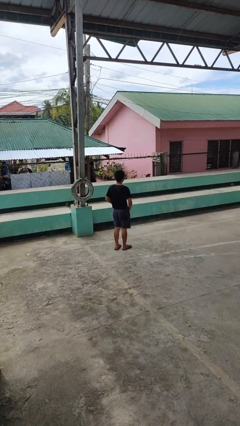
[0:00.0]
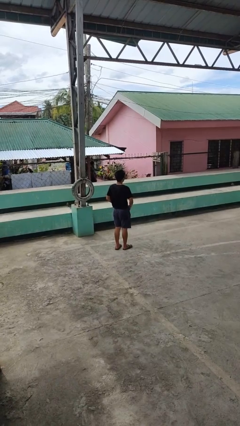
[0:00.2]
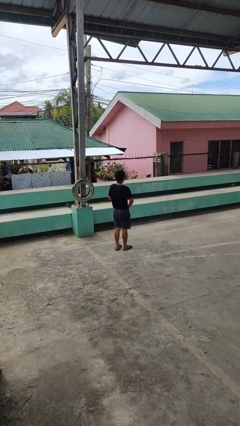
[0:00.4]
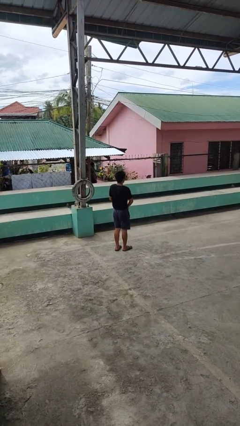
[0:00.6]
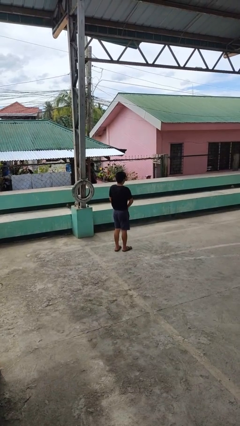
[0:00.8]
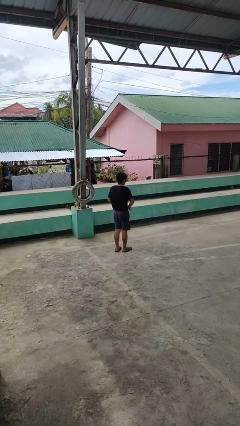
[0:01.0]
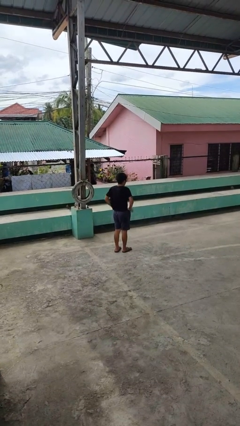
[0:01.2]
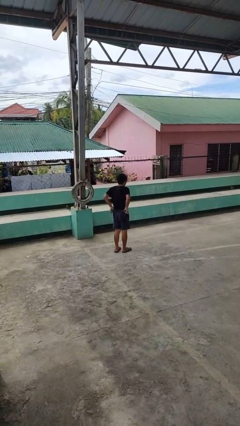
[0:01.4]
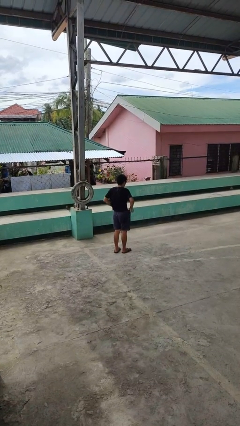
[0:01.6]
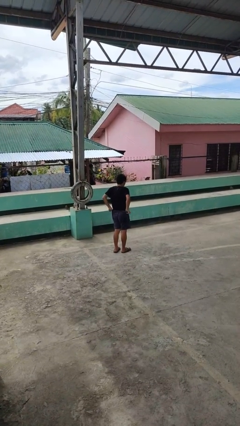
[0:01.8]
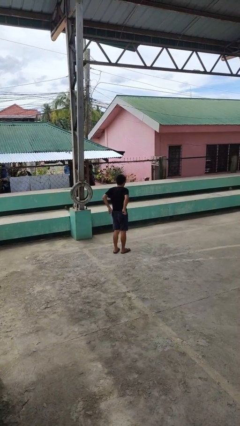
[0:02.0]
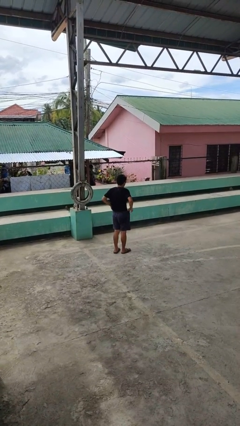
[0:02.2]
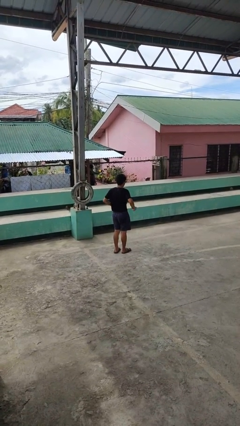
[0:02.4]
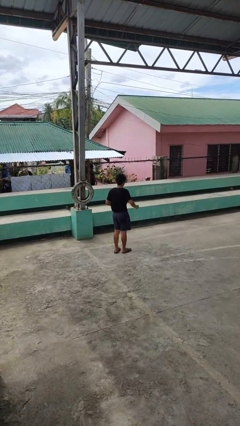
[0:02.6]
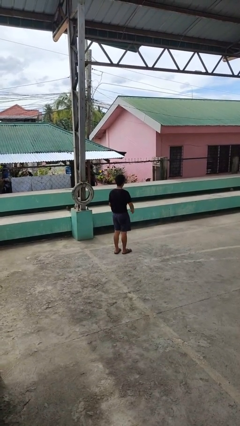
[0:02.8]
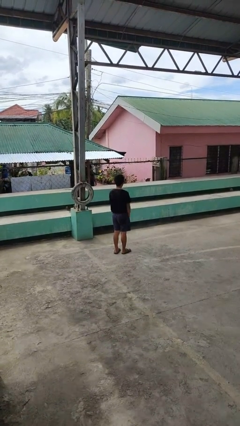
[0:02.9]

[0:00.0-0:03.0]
person hikes up pants

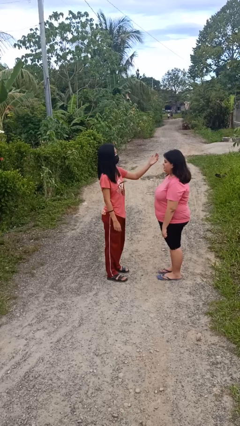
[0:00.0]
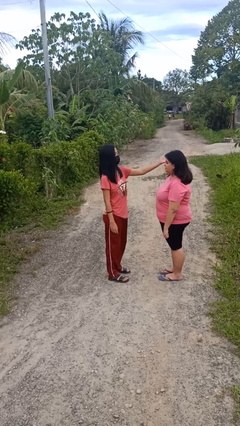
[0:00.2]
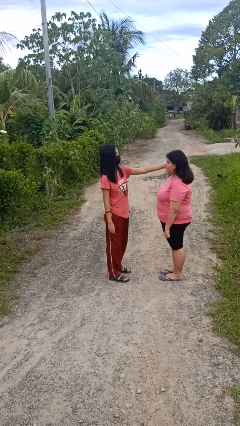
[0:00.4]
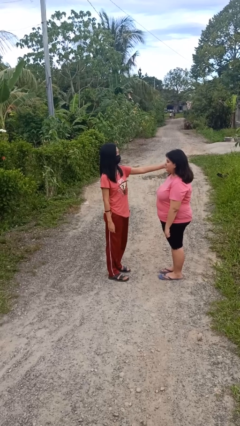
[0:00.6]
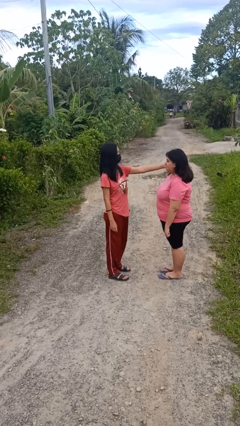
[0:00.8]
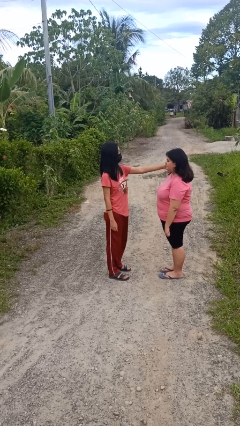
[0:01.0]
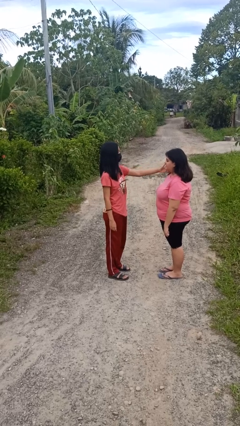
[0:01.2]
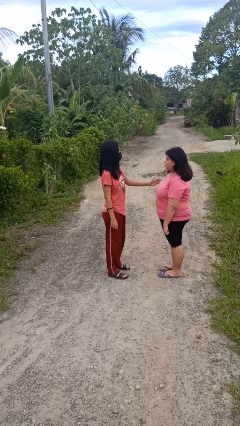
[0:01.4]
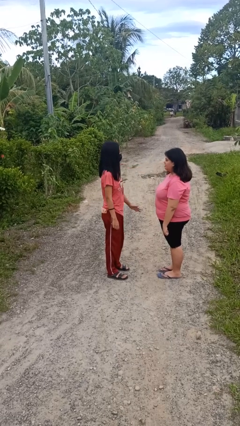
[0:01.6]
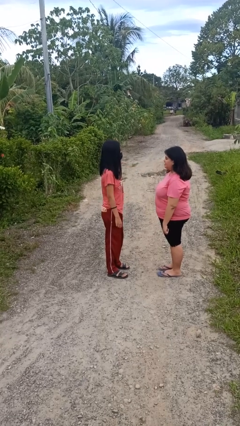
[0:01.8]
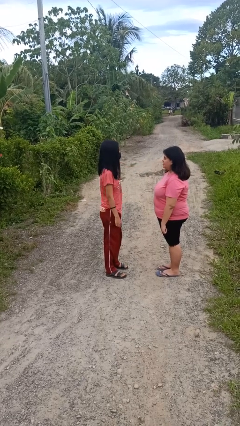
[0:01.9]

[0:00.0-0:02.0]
person touches face of person

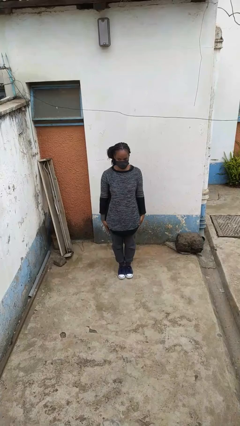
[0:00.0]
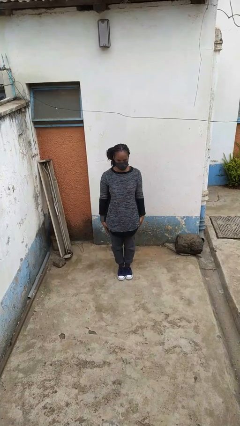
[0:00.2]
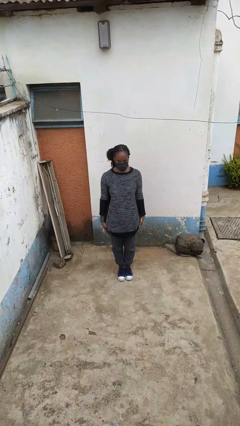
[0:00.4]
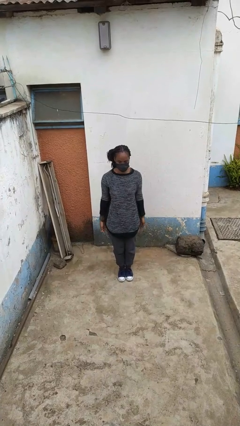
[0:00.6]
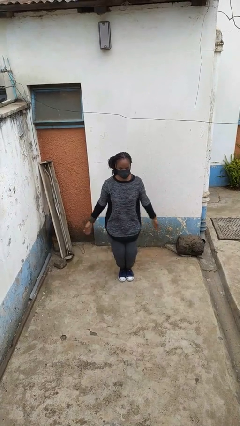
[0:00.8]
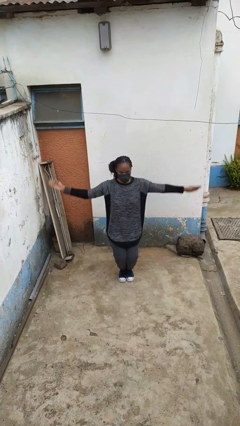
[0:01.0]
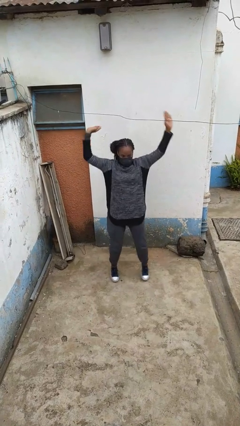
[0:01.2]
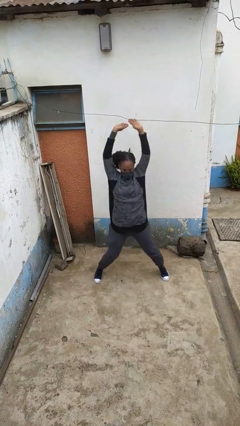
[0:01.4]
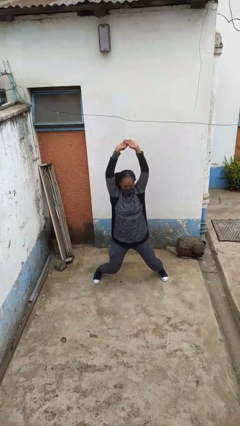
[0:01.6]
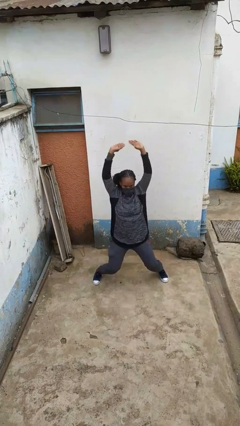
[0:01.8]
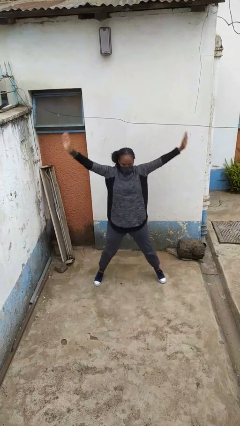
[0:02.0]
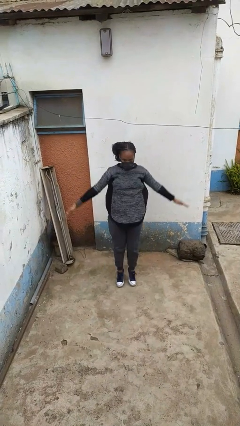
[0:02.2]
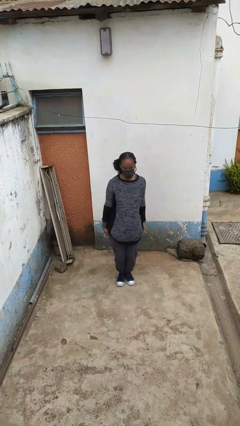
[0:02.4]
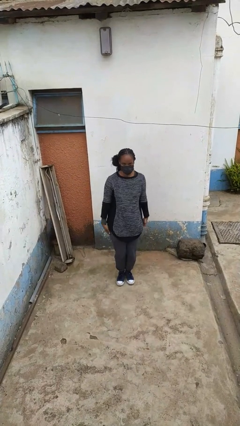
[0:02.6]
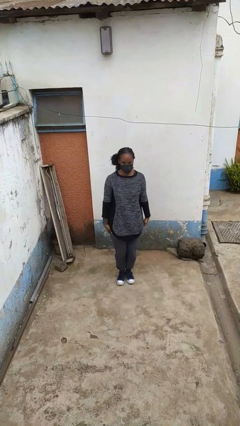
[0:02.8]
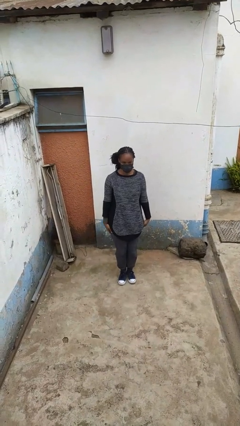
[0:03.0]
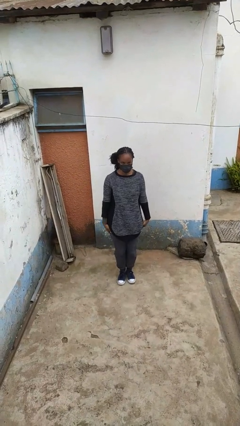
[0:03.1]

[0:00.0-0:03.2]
person exercises with jumping jacks

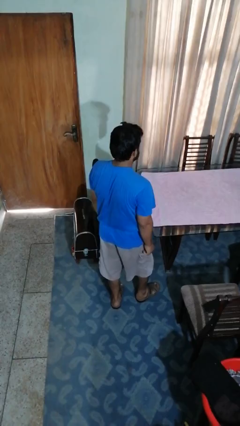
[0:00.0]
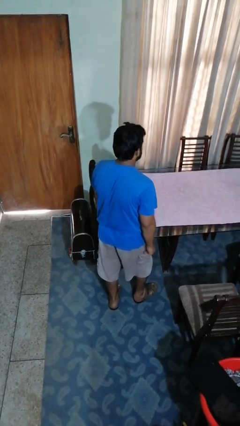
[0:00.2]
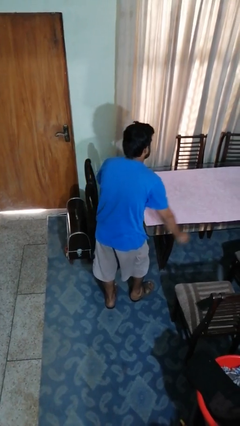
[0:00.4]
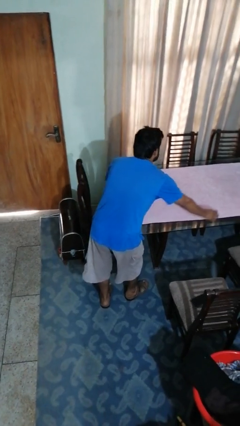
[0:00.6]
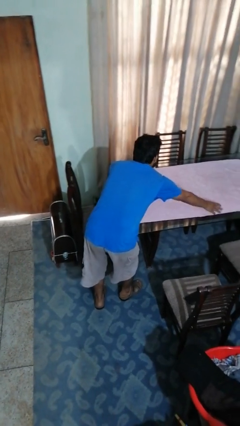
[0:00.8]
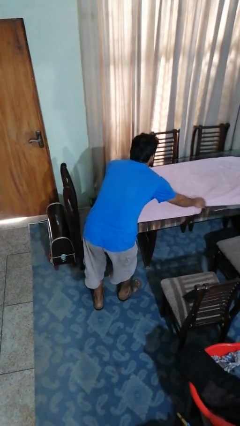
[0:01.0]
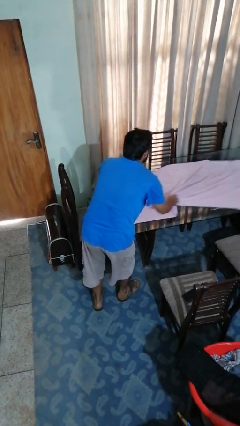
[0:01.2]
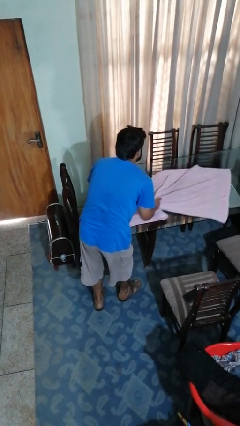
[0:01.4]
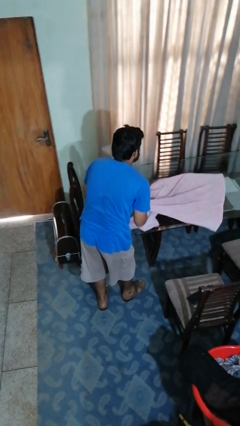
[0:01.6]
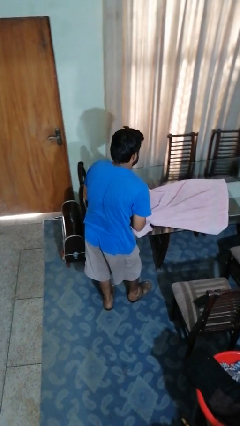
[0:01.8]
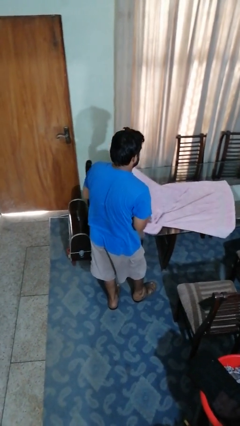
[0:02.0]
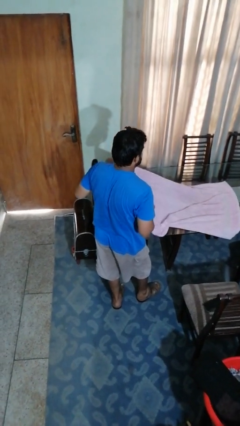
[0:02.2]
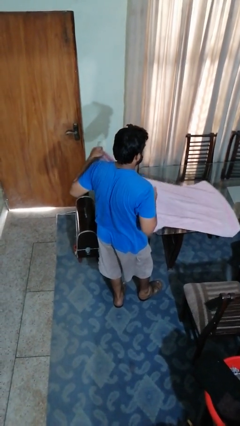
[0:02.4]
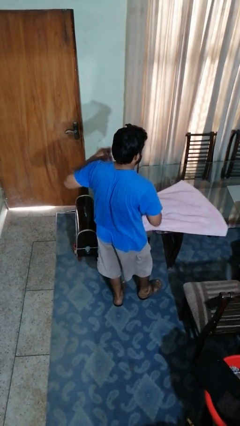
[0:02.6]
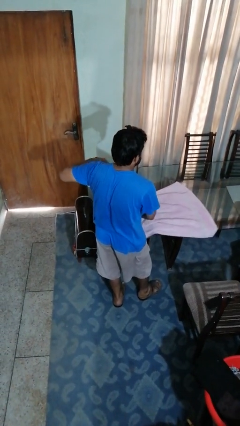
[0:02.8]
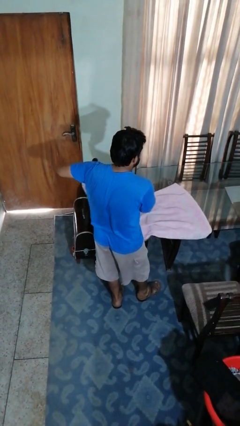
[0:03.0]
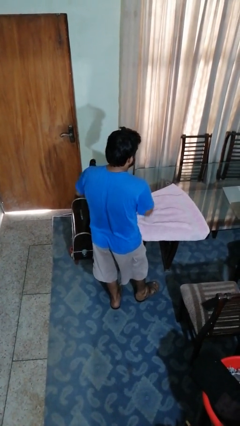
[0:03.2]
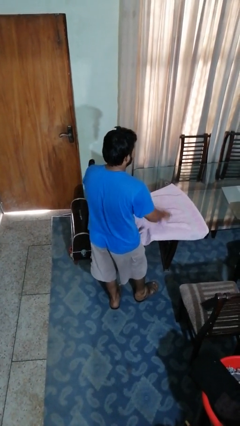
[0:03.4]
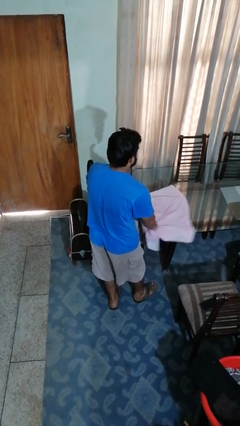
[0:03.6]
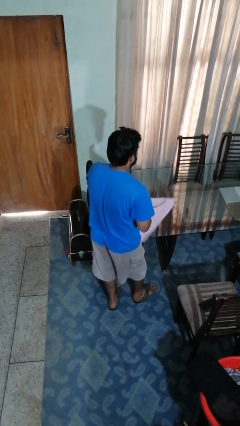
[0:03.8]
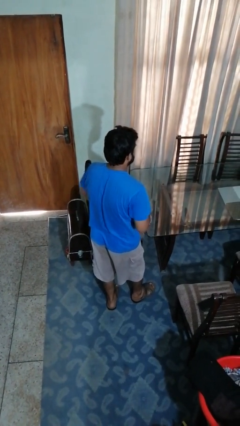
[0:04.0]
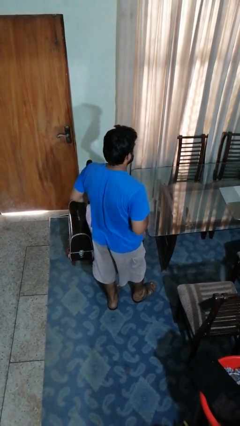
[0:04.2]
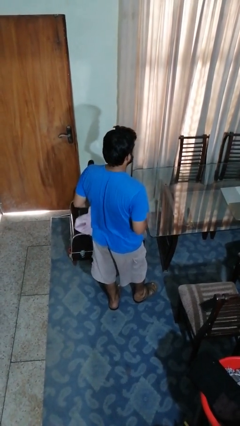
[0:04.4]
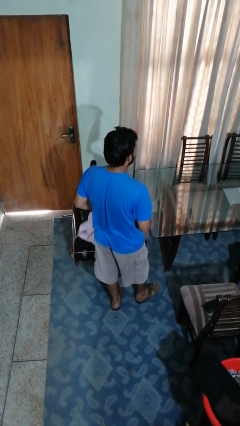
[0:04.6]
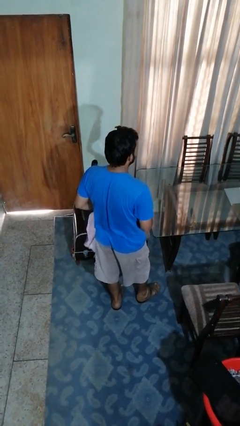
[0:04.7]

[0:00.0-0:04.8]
person folds tablecloth

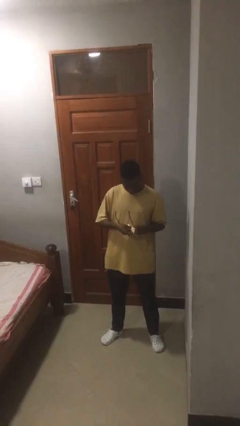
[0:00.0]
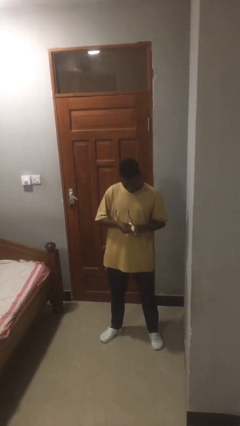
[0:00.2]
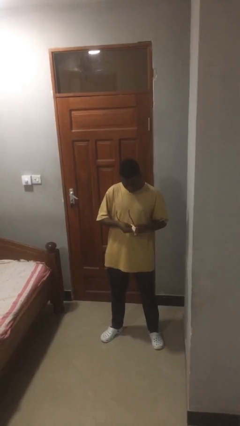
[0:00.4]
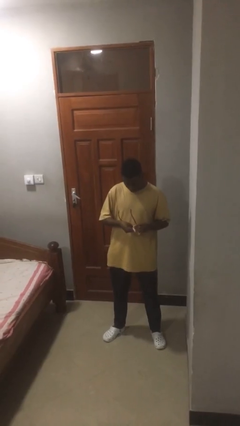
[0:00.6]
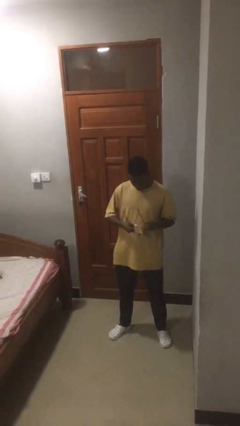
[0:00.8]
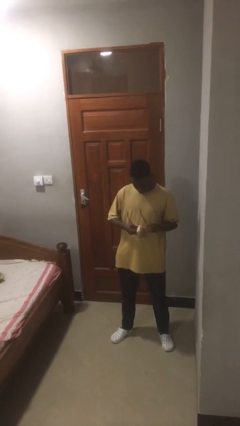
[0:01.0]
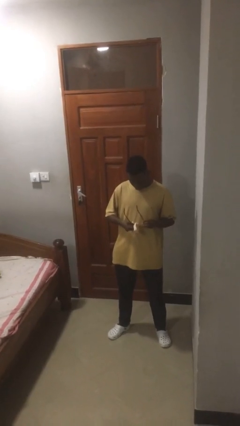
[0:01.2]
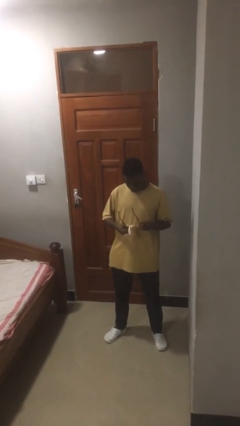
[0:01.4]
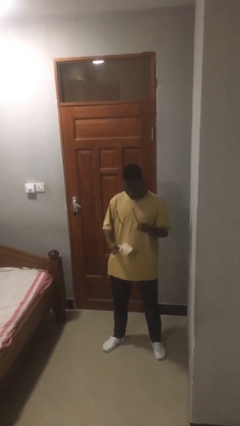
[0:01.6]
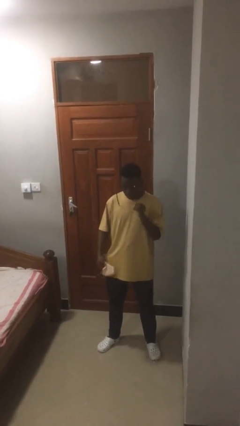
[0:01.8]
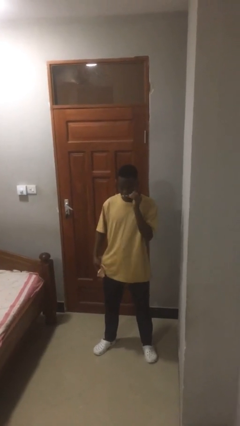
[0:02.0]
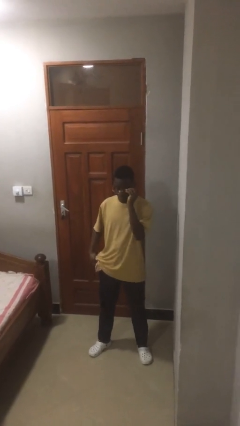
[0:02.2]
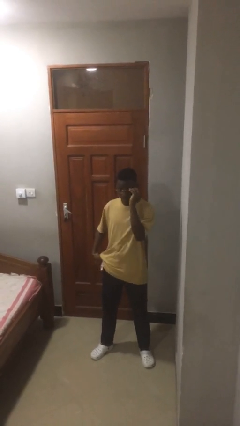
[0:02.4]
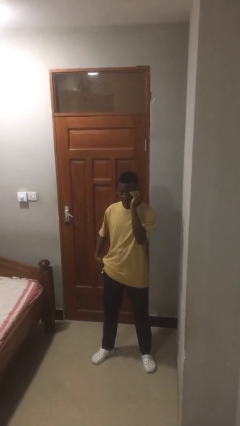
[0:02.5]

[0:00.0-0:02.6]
person cleans eyeglasses

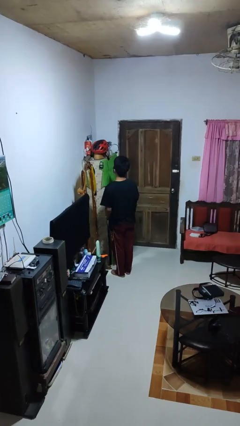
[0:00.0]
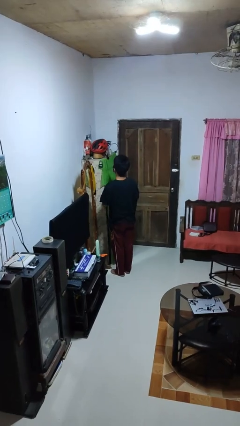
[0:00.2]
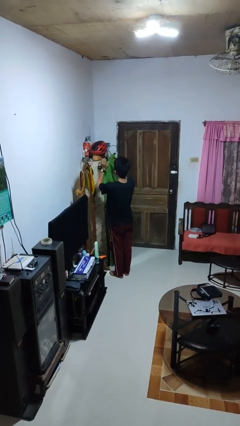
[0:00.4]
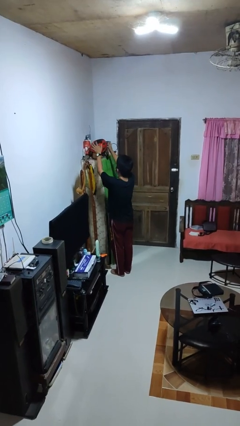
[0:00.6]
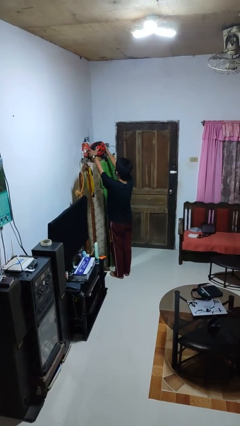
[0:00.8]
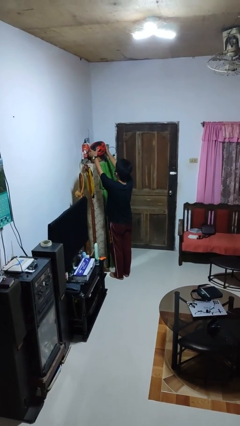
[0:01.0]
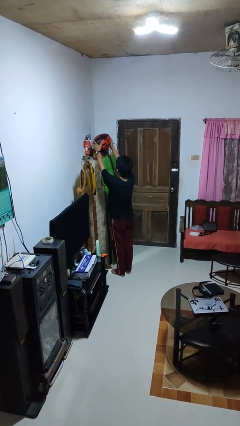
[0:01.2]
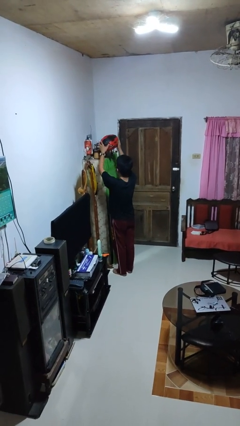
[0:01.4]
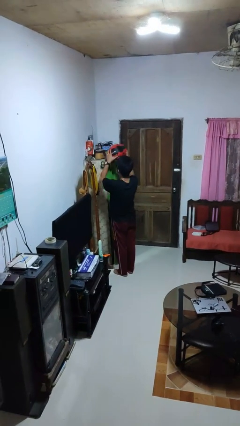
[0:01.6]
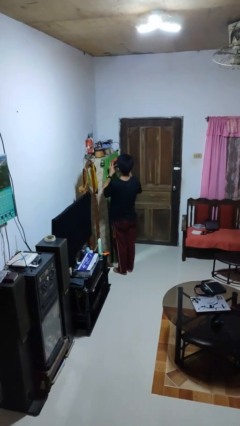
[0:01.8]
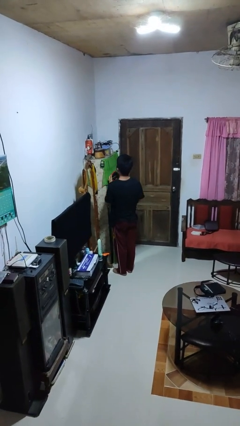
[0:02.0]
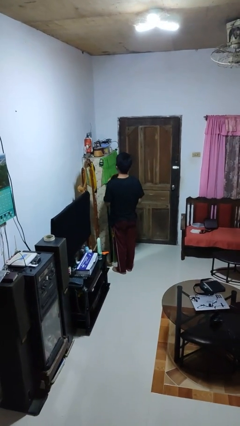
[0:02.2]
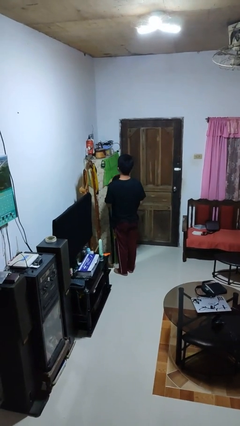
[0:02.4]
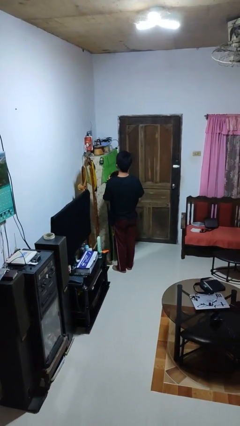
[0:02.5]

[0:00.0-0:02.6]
person picks up object from shelf
